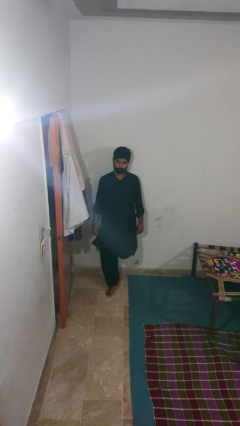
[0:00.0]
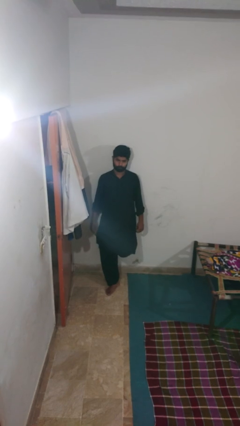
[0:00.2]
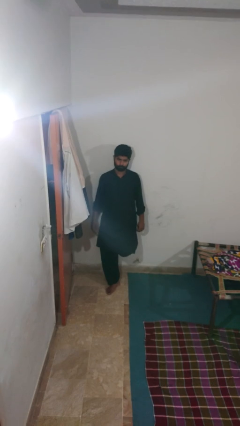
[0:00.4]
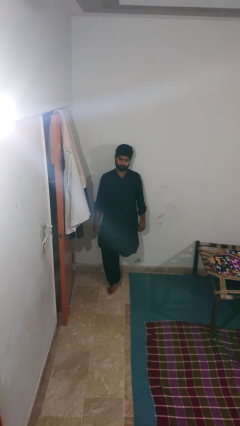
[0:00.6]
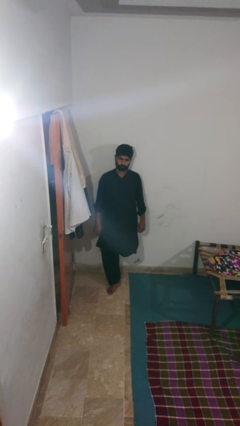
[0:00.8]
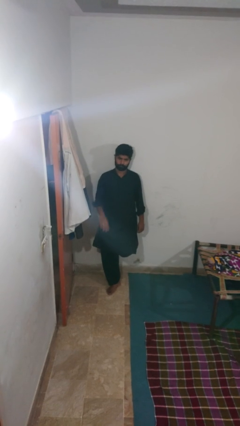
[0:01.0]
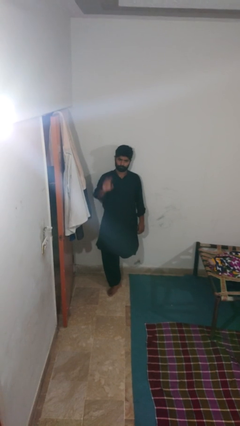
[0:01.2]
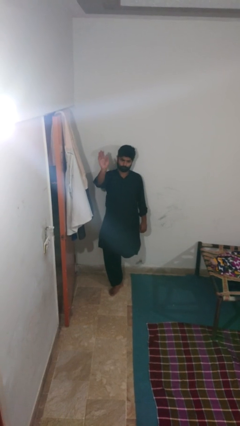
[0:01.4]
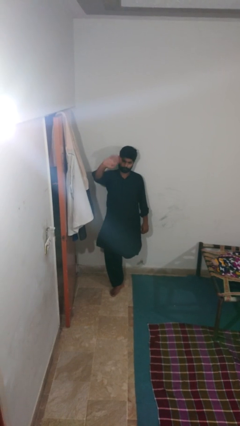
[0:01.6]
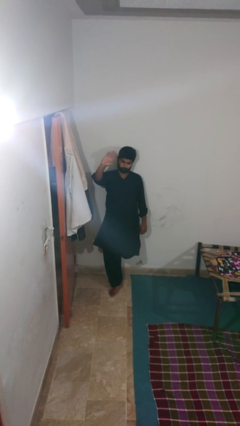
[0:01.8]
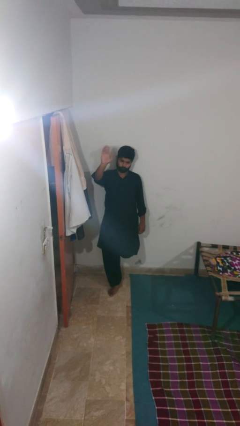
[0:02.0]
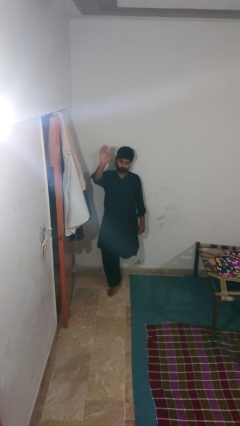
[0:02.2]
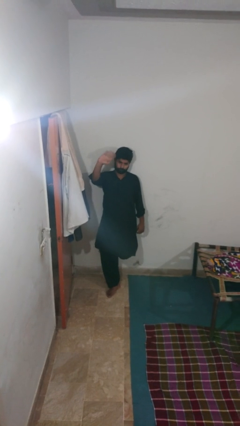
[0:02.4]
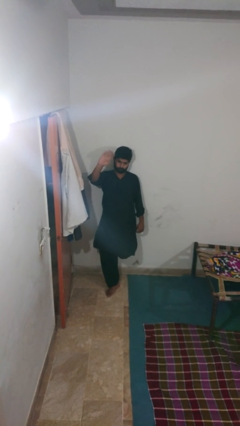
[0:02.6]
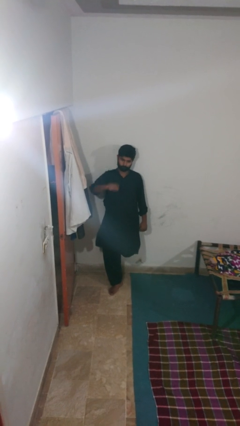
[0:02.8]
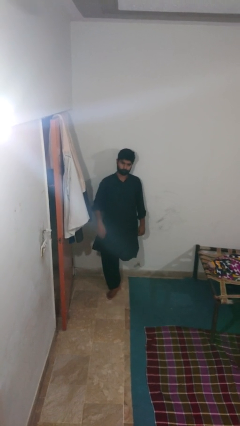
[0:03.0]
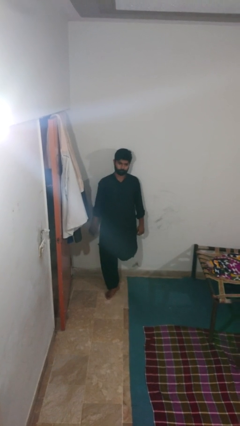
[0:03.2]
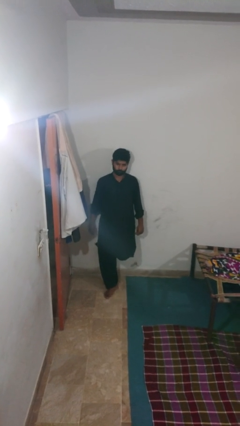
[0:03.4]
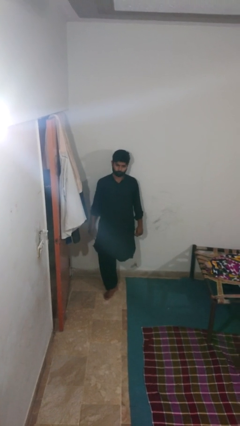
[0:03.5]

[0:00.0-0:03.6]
person waves at person

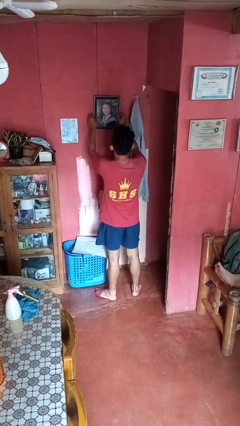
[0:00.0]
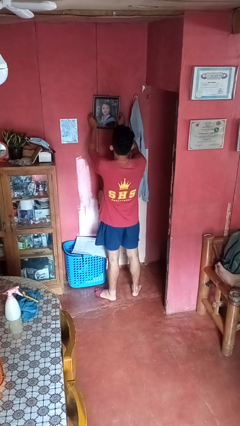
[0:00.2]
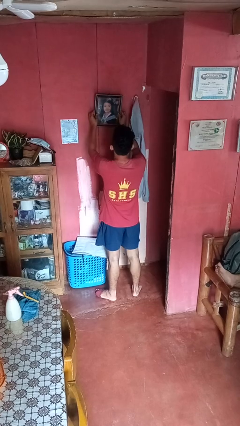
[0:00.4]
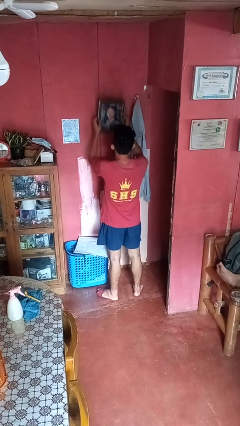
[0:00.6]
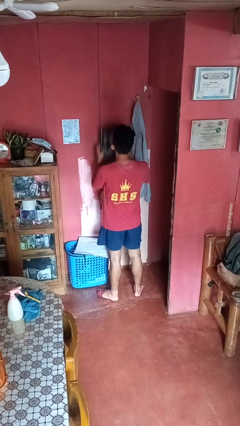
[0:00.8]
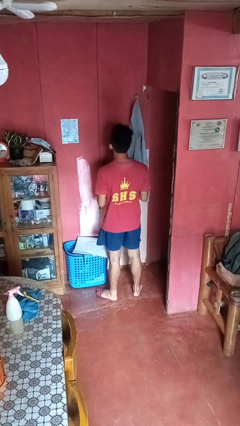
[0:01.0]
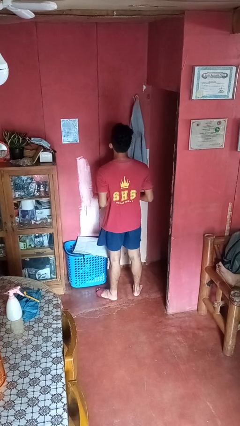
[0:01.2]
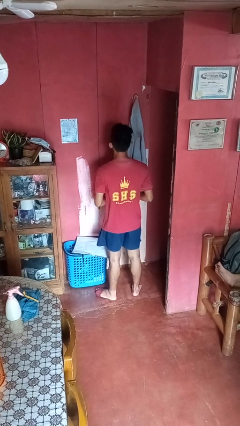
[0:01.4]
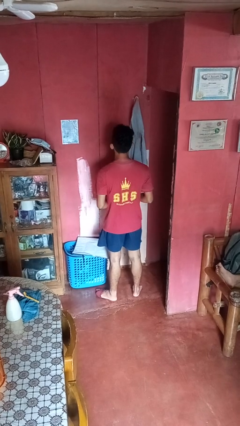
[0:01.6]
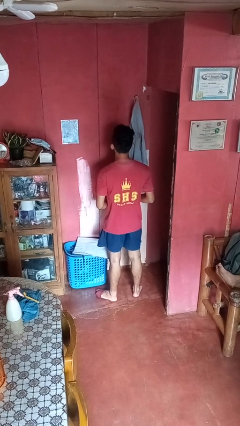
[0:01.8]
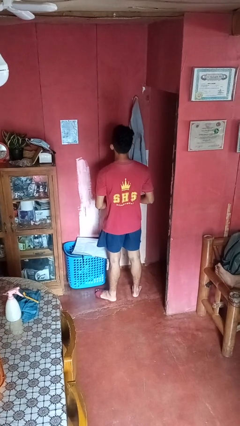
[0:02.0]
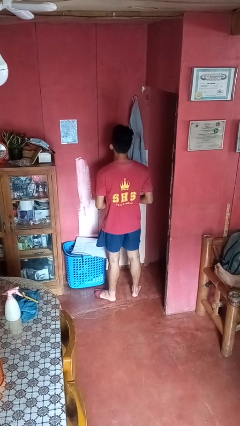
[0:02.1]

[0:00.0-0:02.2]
person takes down picture frame

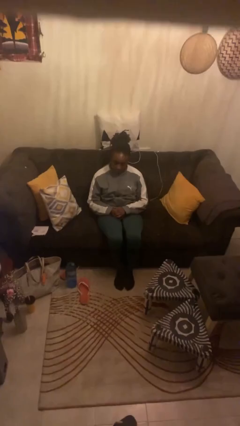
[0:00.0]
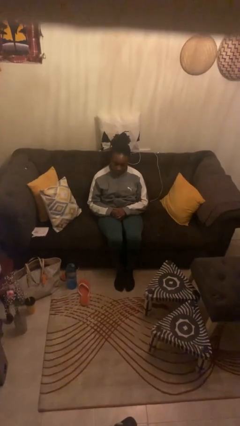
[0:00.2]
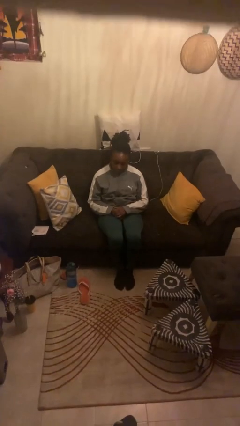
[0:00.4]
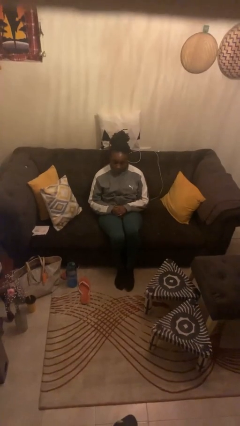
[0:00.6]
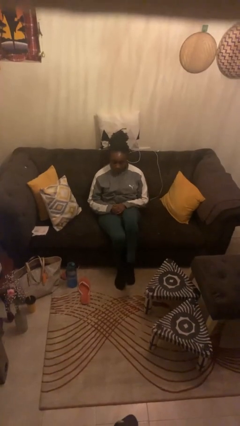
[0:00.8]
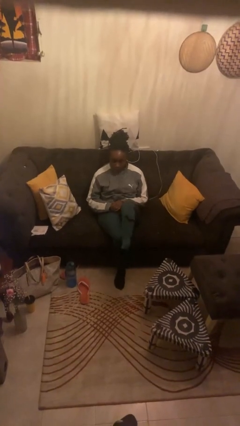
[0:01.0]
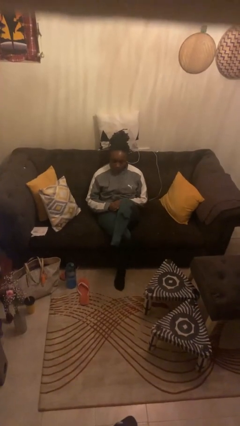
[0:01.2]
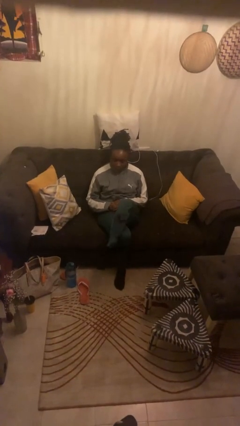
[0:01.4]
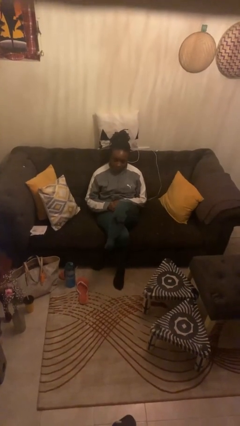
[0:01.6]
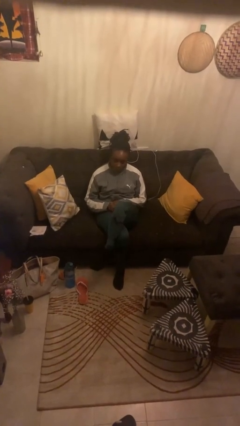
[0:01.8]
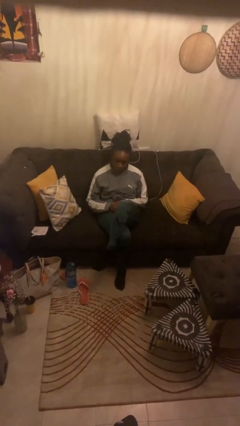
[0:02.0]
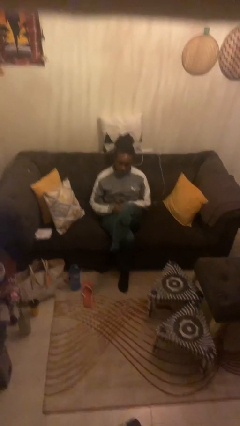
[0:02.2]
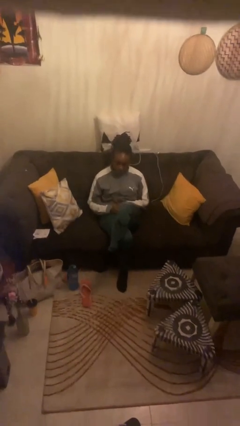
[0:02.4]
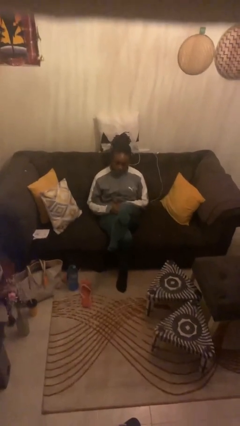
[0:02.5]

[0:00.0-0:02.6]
person crosses legs

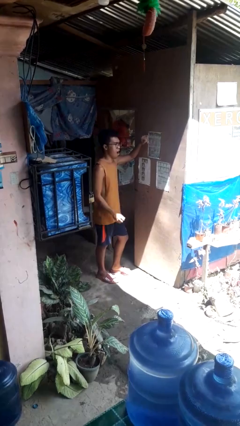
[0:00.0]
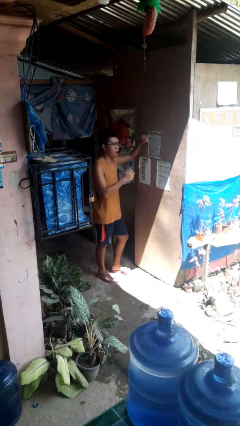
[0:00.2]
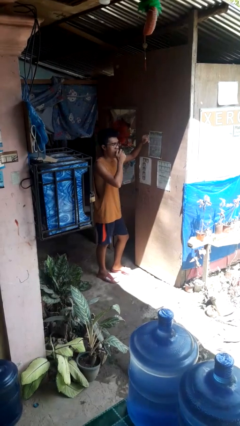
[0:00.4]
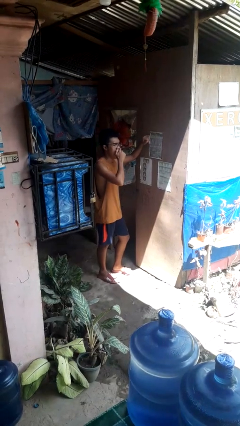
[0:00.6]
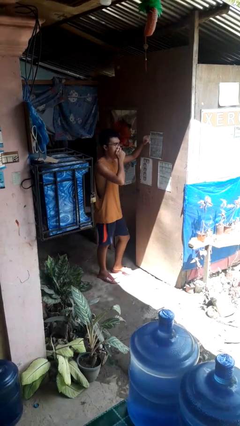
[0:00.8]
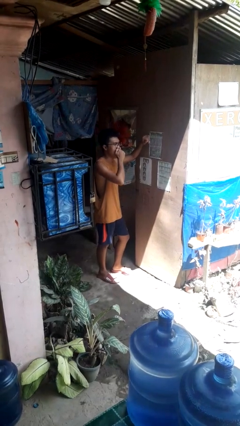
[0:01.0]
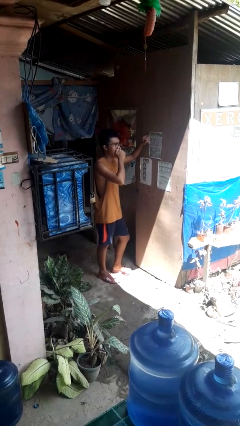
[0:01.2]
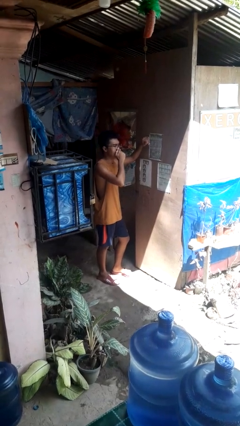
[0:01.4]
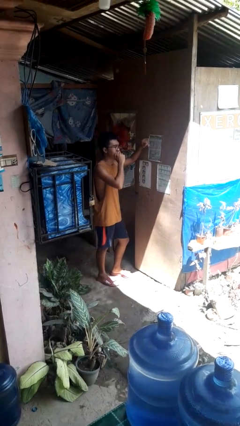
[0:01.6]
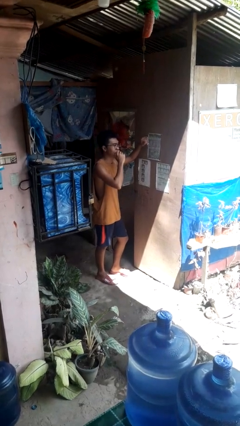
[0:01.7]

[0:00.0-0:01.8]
person yawns

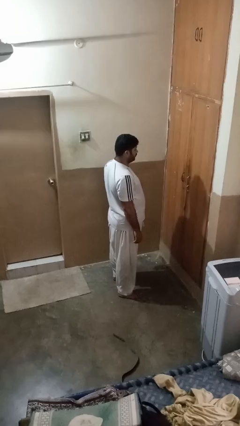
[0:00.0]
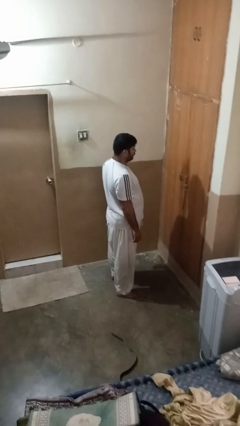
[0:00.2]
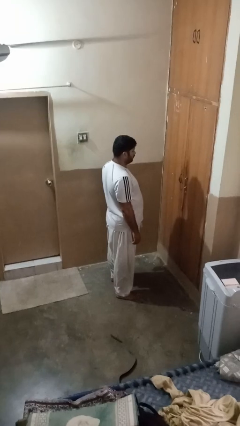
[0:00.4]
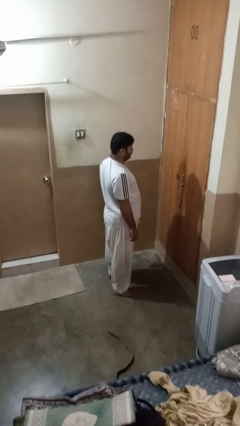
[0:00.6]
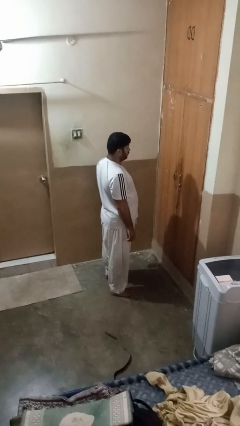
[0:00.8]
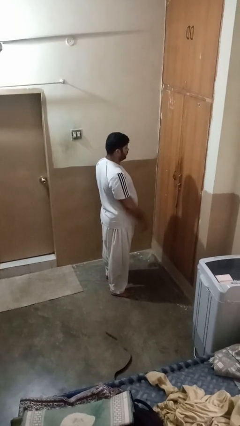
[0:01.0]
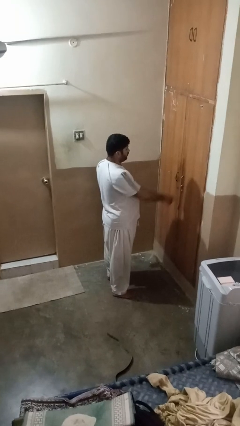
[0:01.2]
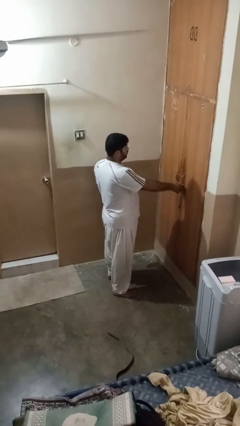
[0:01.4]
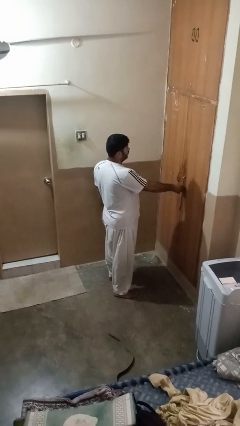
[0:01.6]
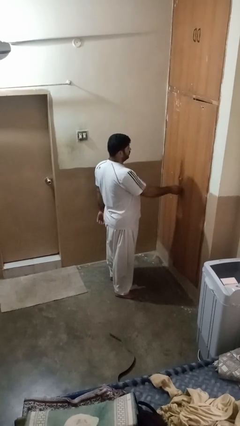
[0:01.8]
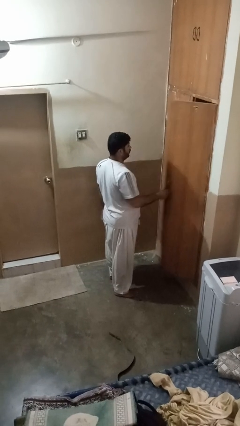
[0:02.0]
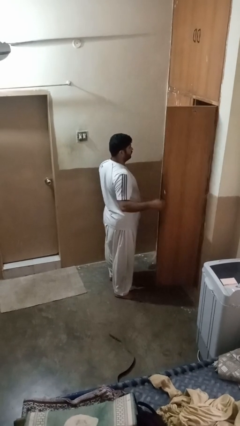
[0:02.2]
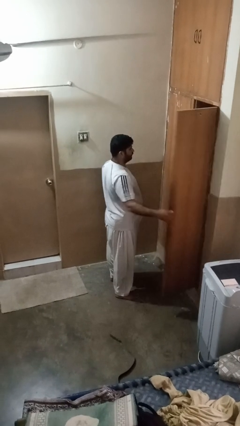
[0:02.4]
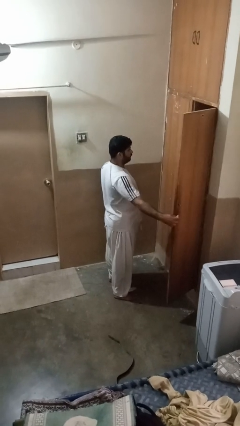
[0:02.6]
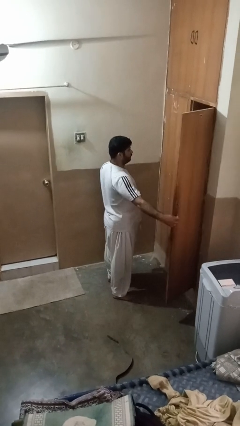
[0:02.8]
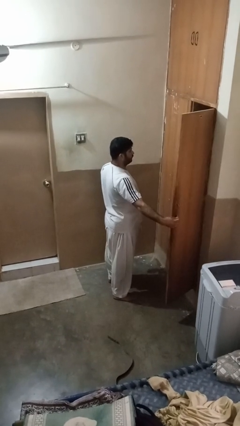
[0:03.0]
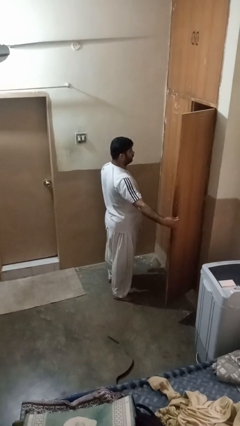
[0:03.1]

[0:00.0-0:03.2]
person opens closet door

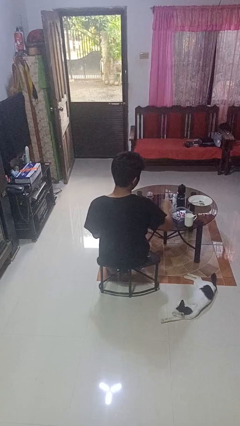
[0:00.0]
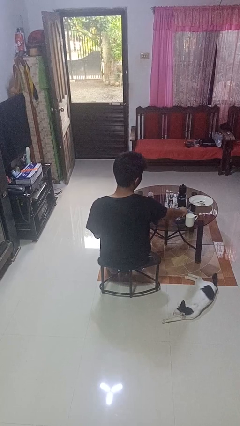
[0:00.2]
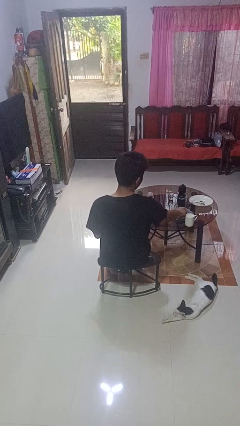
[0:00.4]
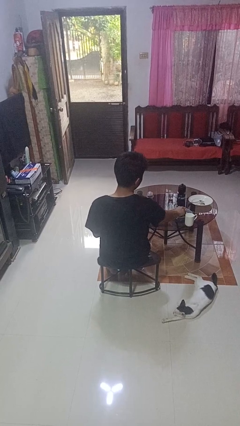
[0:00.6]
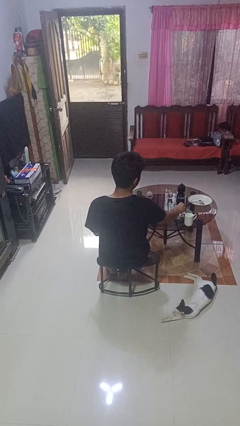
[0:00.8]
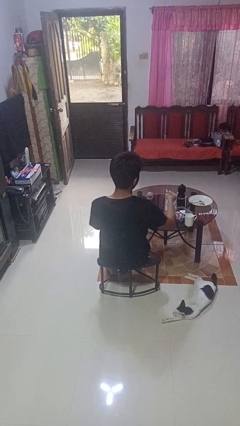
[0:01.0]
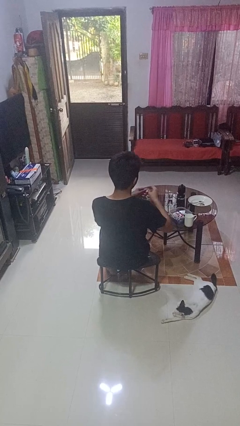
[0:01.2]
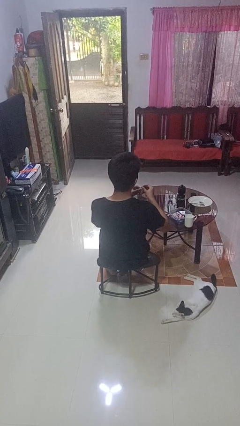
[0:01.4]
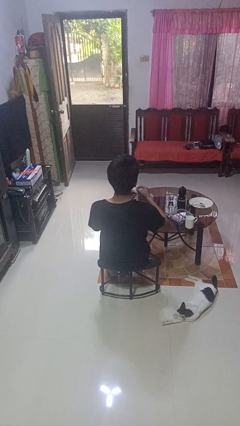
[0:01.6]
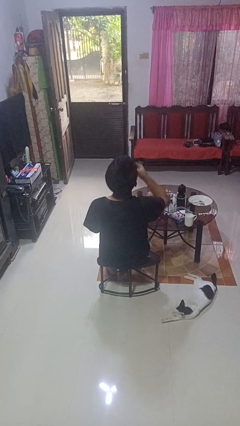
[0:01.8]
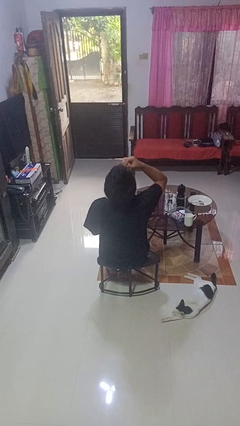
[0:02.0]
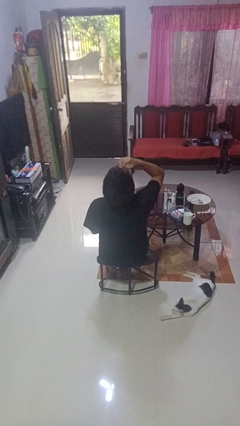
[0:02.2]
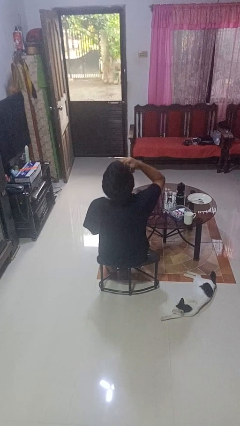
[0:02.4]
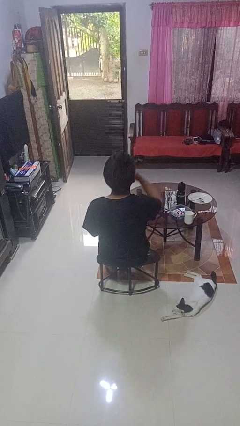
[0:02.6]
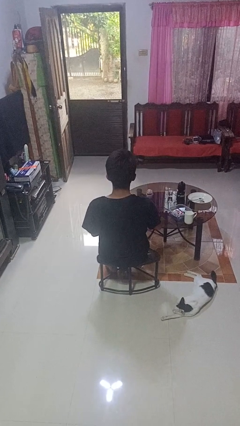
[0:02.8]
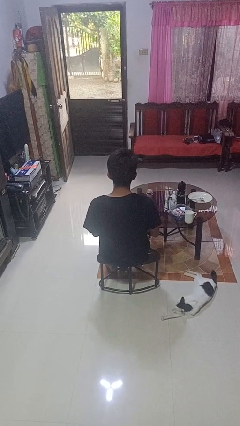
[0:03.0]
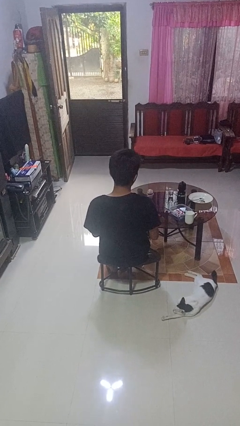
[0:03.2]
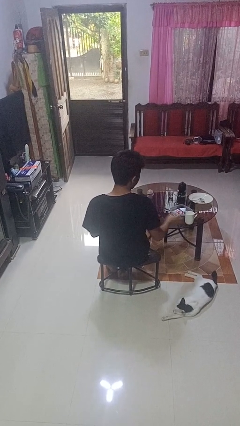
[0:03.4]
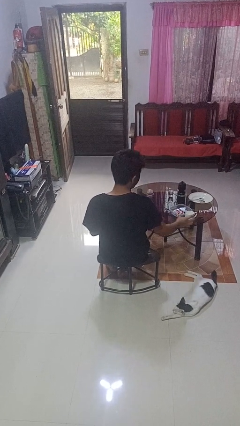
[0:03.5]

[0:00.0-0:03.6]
person takes medicine pills
